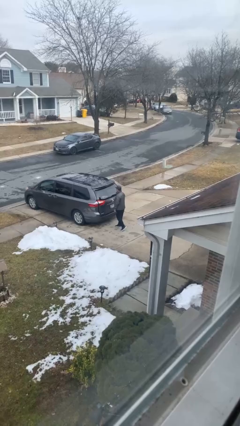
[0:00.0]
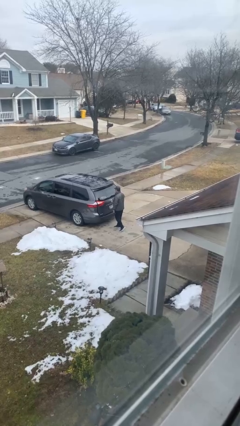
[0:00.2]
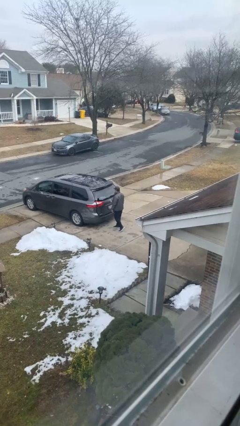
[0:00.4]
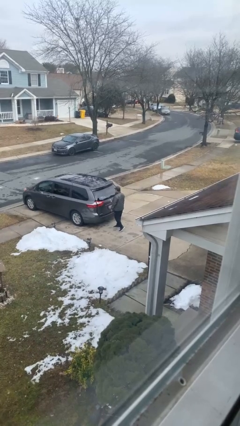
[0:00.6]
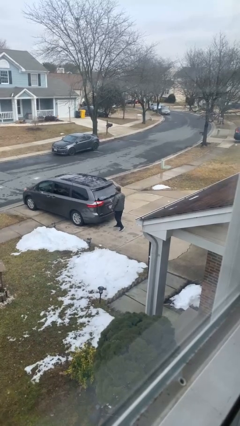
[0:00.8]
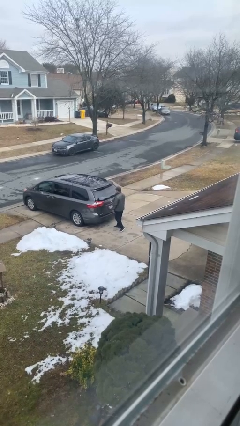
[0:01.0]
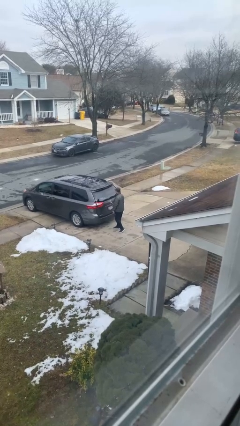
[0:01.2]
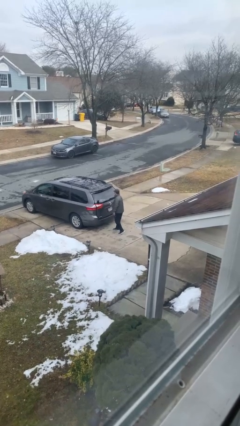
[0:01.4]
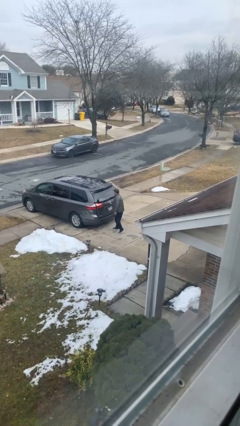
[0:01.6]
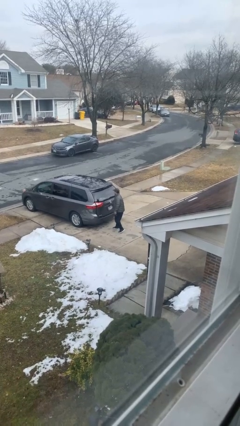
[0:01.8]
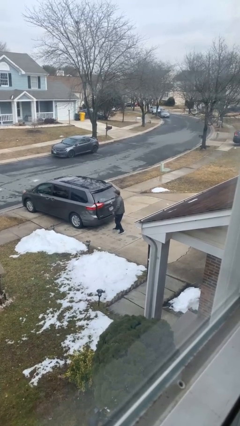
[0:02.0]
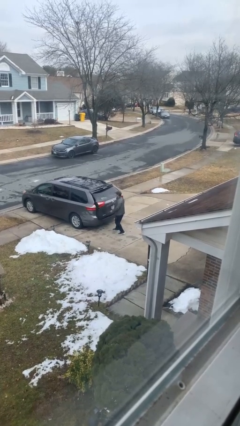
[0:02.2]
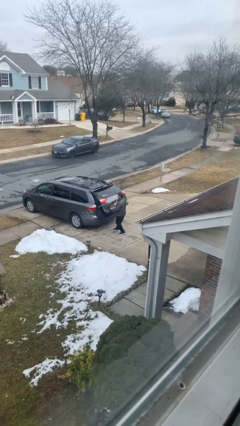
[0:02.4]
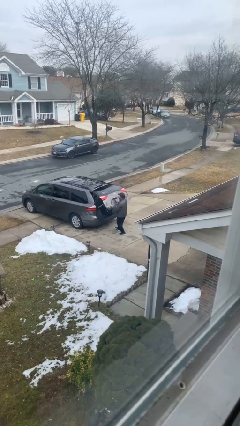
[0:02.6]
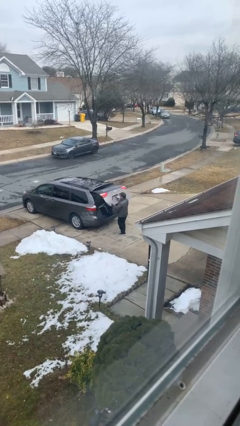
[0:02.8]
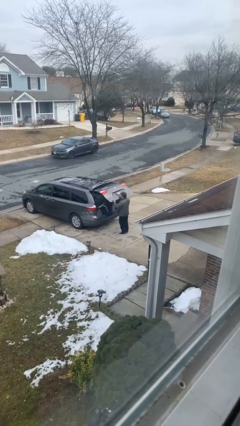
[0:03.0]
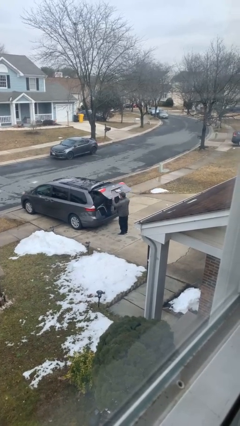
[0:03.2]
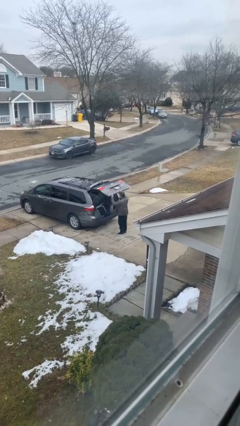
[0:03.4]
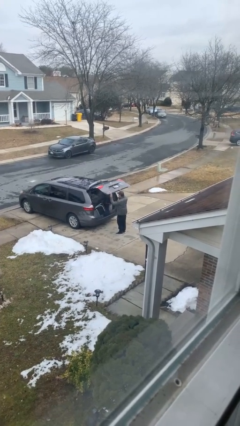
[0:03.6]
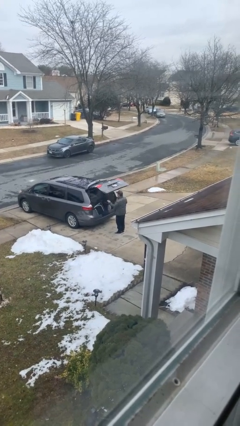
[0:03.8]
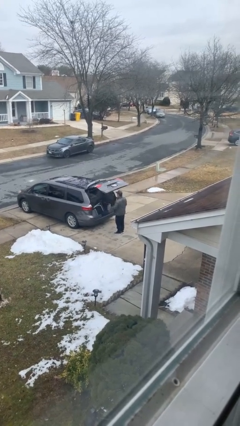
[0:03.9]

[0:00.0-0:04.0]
person opens car trunk

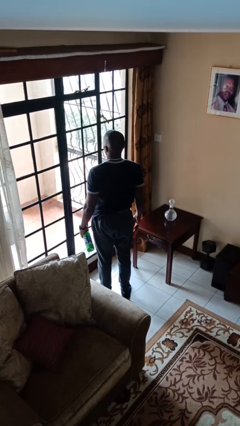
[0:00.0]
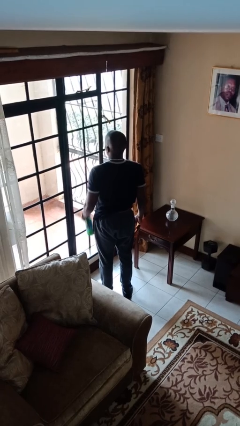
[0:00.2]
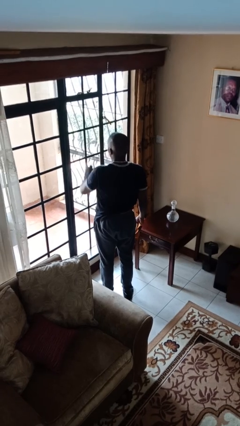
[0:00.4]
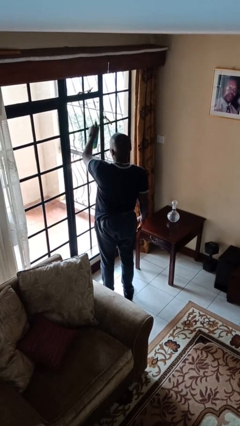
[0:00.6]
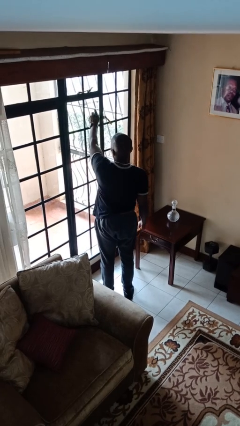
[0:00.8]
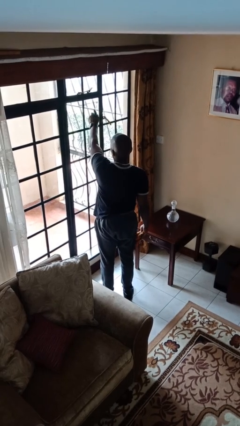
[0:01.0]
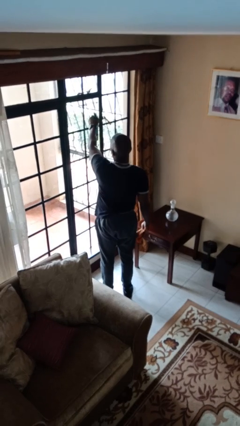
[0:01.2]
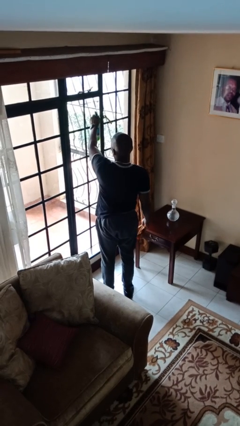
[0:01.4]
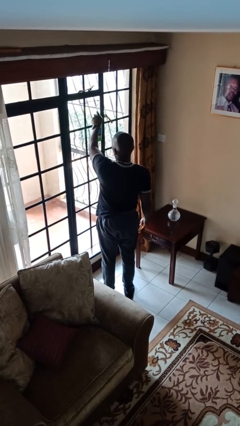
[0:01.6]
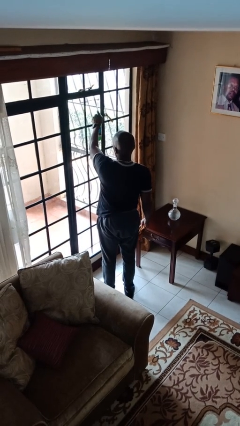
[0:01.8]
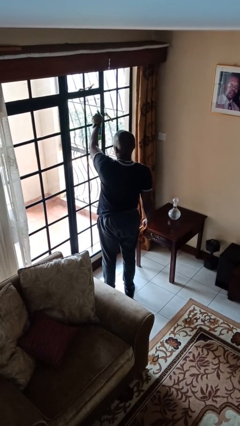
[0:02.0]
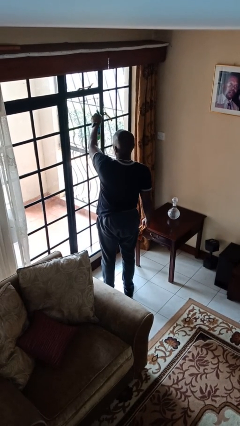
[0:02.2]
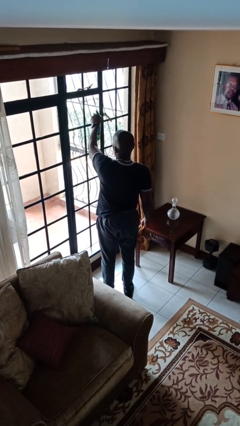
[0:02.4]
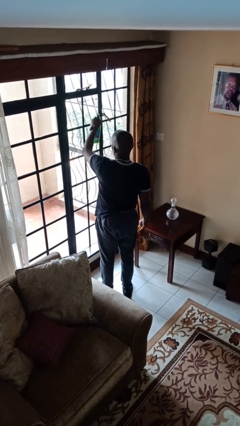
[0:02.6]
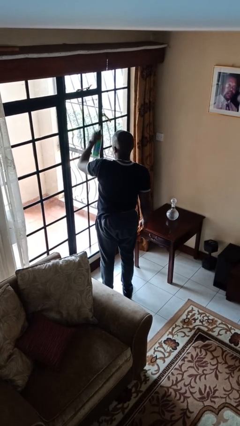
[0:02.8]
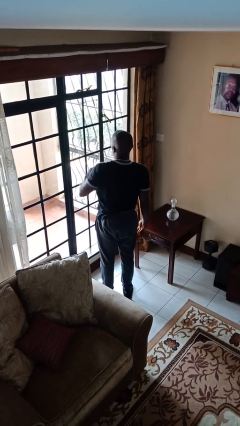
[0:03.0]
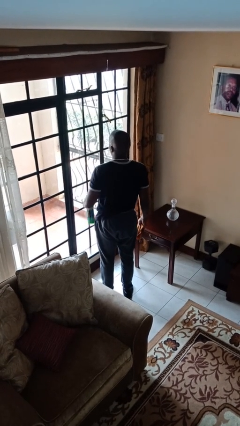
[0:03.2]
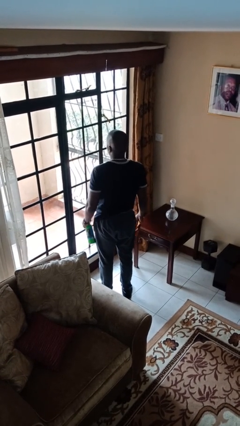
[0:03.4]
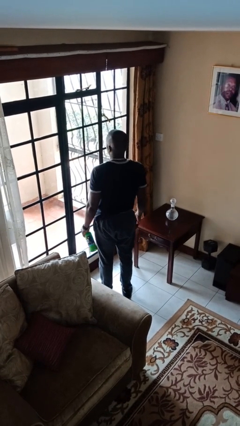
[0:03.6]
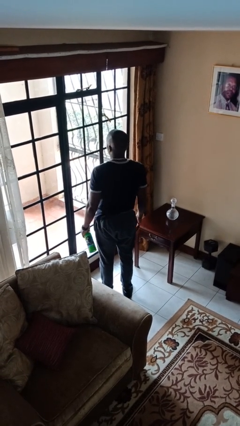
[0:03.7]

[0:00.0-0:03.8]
person sprays from bottle

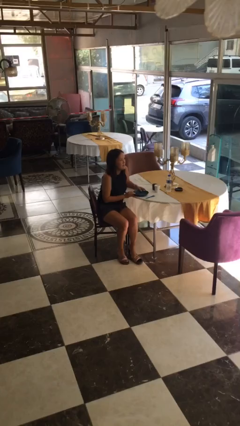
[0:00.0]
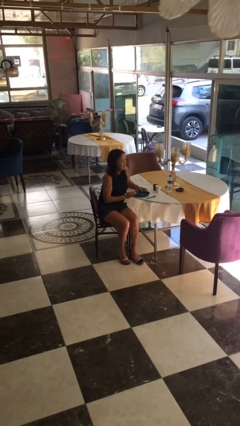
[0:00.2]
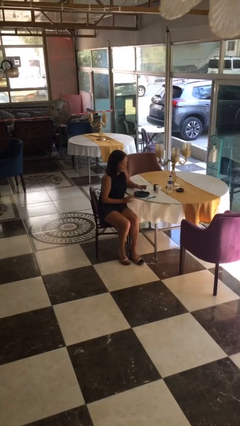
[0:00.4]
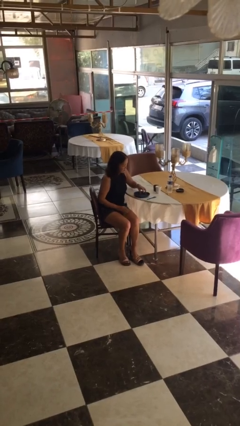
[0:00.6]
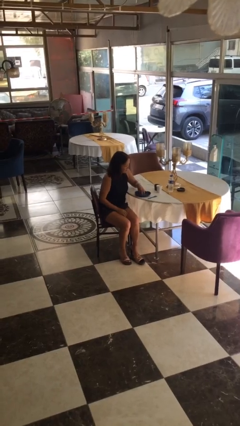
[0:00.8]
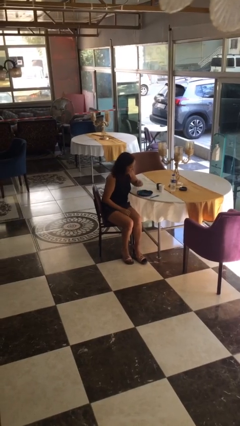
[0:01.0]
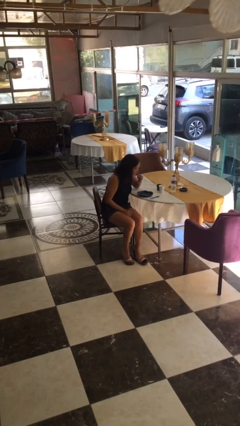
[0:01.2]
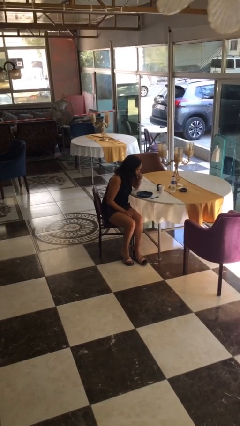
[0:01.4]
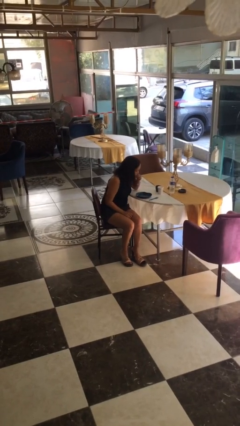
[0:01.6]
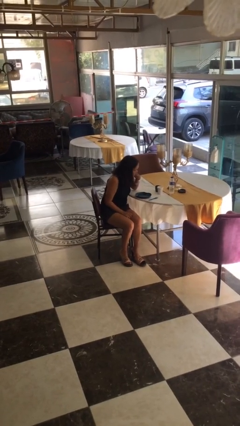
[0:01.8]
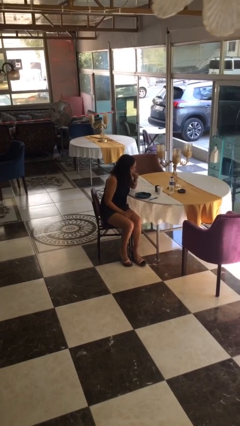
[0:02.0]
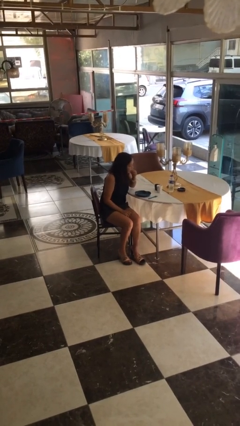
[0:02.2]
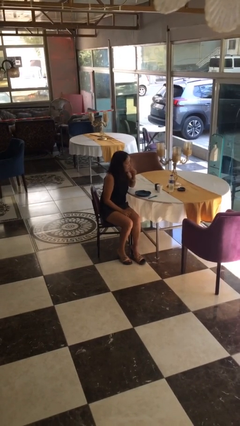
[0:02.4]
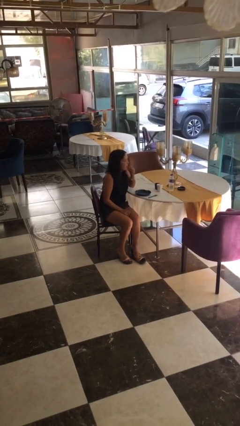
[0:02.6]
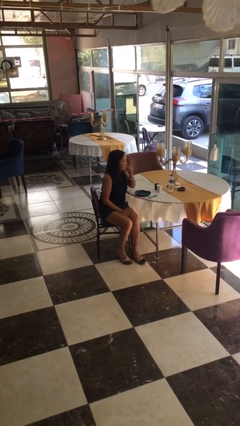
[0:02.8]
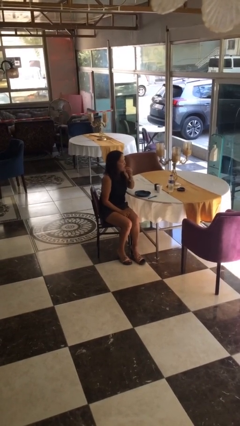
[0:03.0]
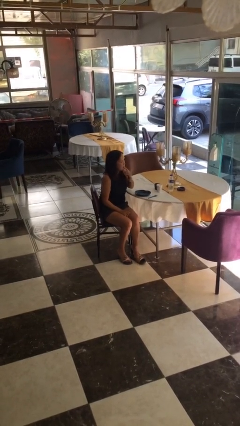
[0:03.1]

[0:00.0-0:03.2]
person eats with hands

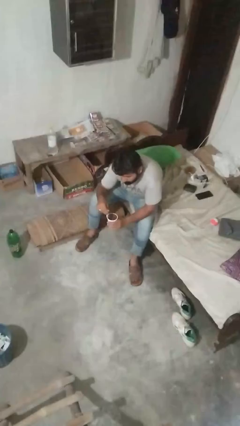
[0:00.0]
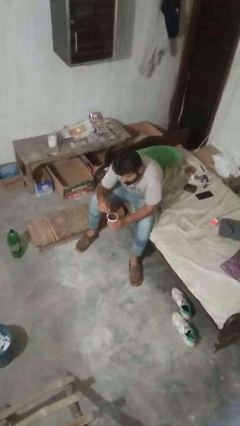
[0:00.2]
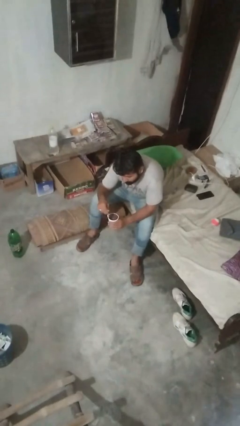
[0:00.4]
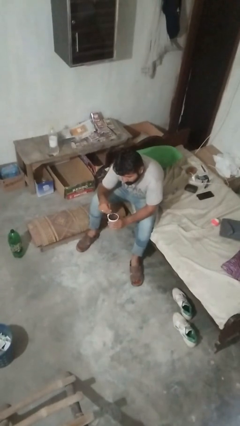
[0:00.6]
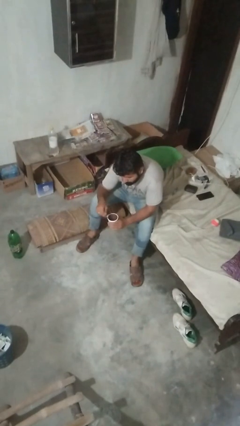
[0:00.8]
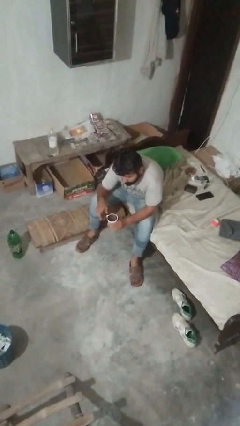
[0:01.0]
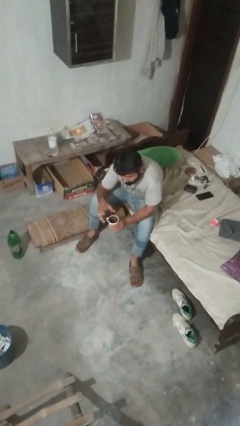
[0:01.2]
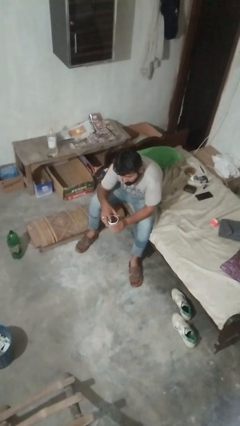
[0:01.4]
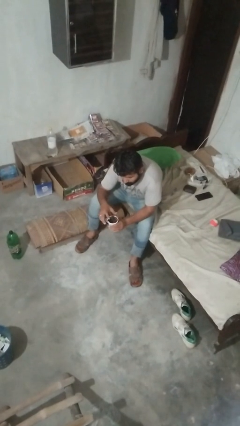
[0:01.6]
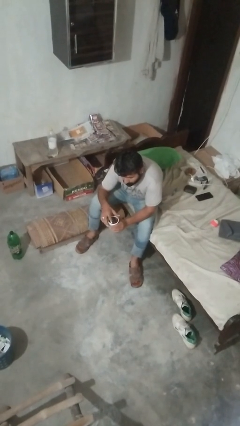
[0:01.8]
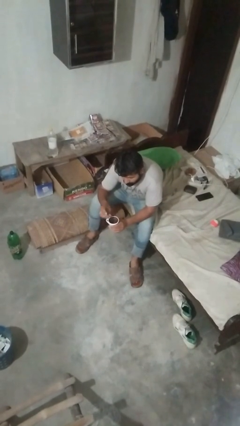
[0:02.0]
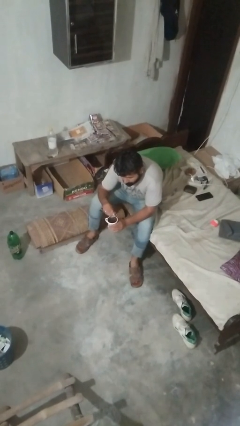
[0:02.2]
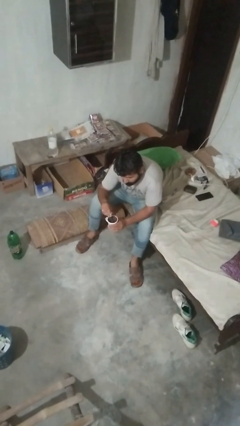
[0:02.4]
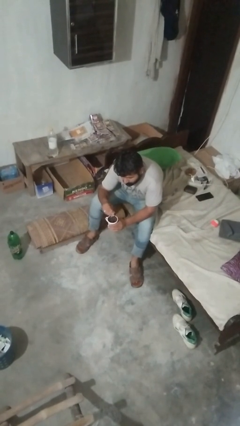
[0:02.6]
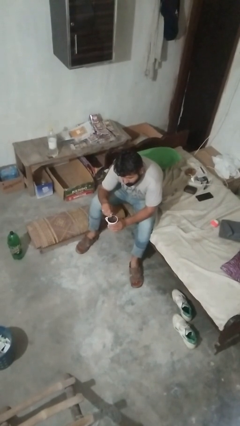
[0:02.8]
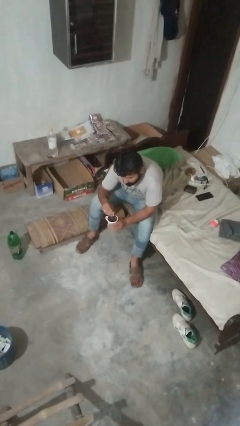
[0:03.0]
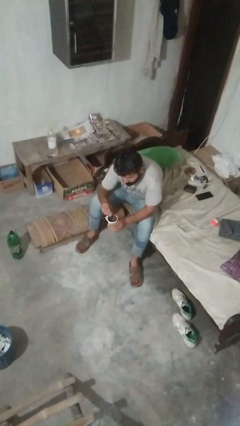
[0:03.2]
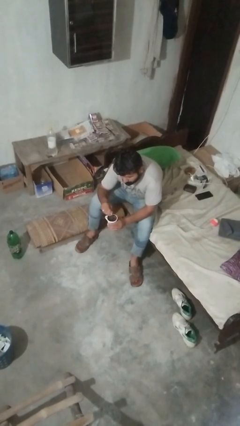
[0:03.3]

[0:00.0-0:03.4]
person stirs mug

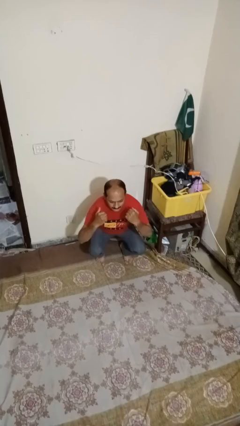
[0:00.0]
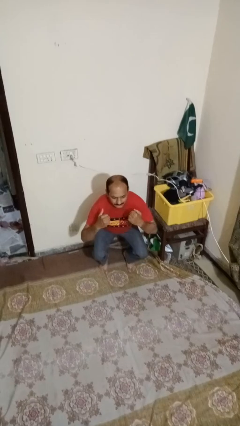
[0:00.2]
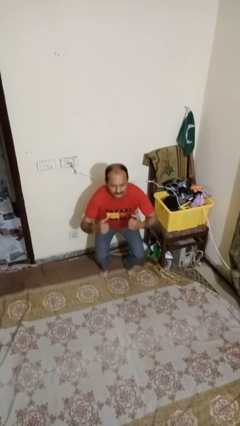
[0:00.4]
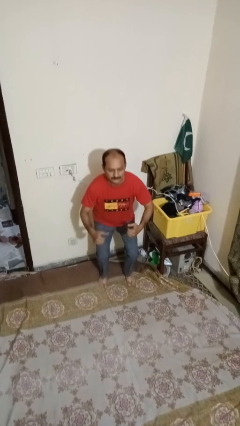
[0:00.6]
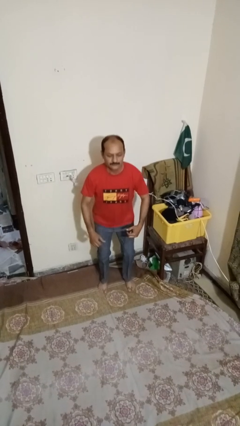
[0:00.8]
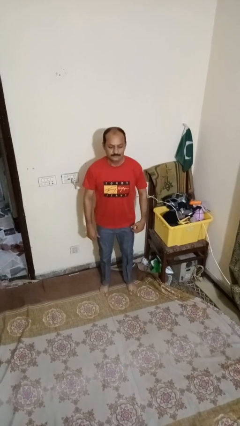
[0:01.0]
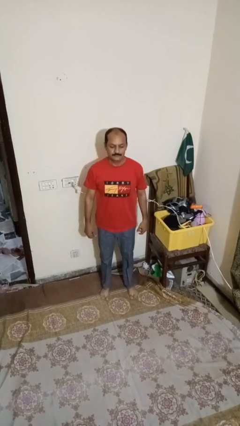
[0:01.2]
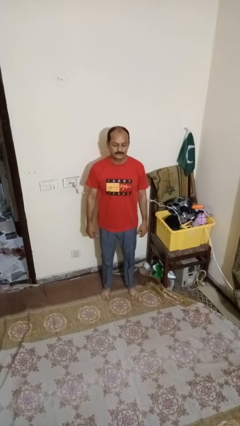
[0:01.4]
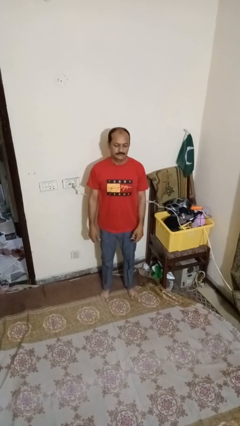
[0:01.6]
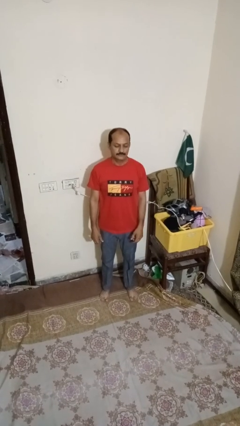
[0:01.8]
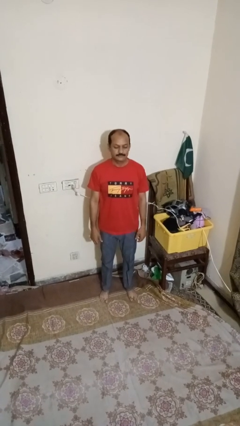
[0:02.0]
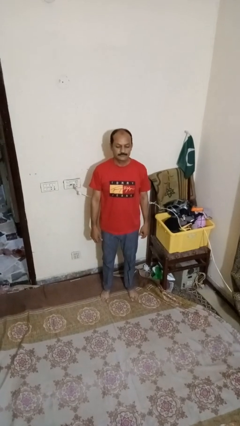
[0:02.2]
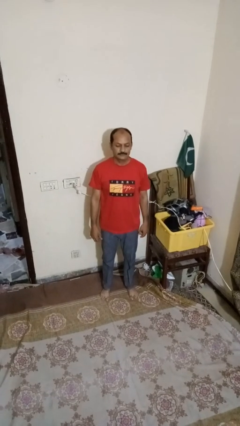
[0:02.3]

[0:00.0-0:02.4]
person stands up

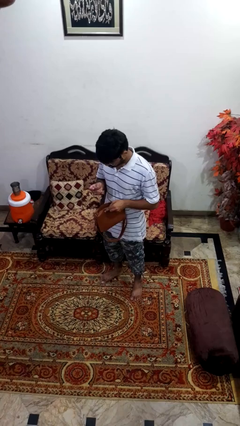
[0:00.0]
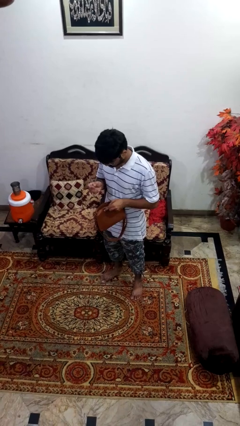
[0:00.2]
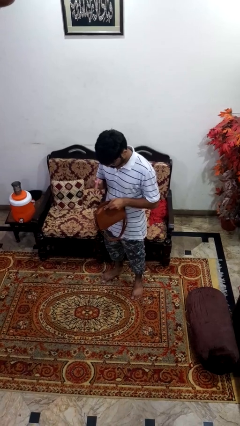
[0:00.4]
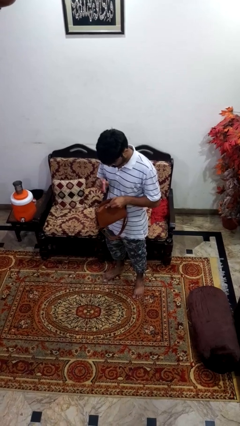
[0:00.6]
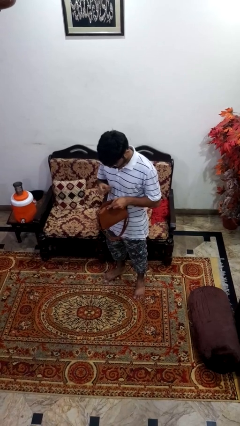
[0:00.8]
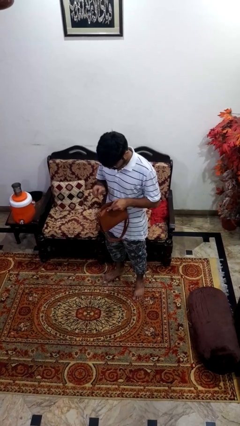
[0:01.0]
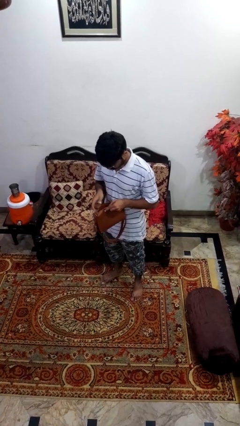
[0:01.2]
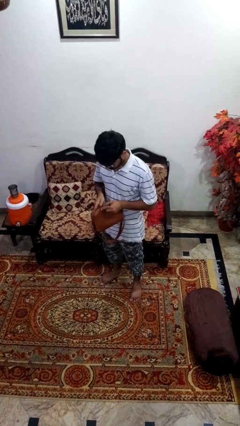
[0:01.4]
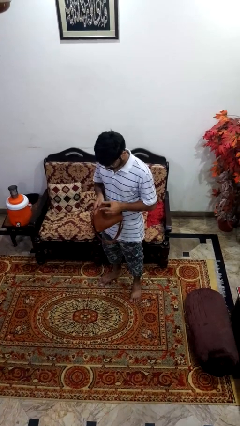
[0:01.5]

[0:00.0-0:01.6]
person puts object into purse
